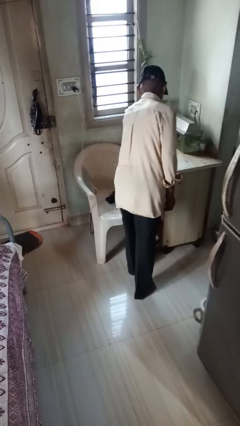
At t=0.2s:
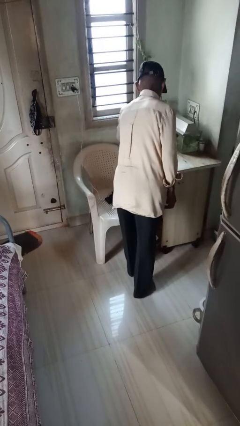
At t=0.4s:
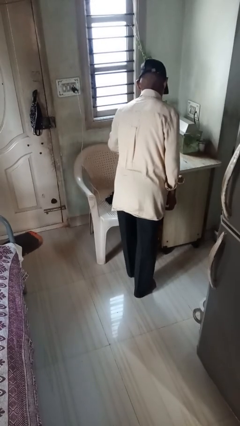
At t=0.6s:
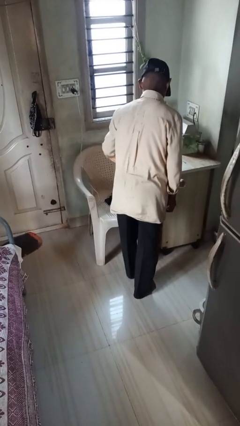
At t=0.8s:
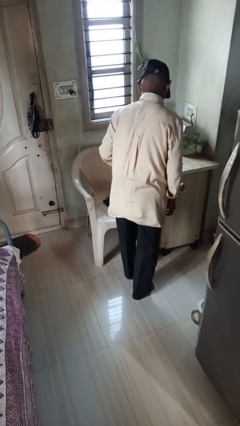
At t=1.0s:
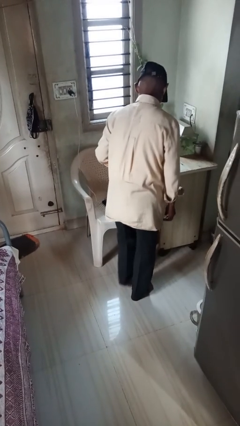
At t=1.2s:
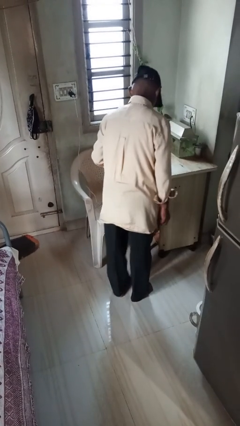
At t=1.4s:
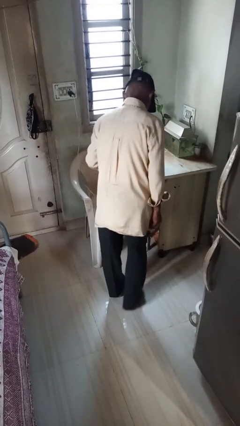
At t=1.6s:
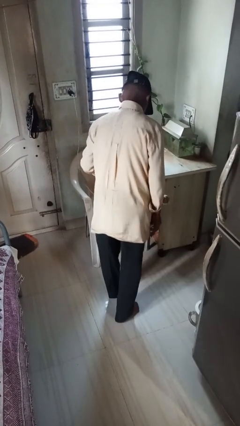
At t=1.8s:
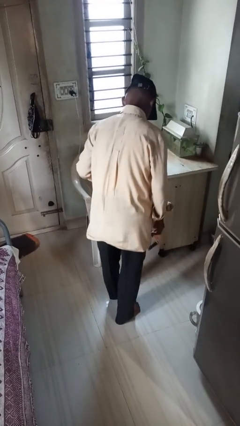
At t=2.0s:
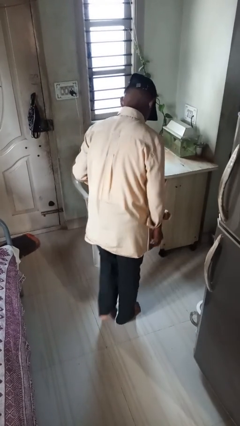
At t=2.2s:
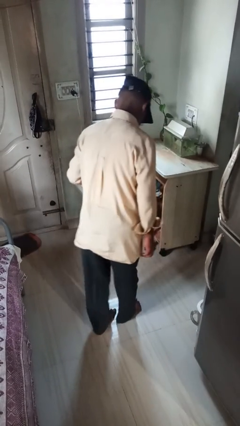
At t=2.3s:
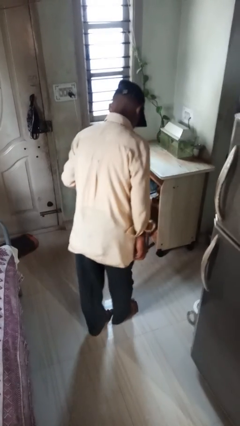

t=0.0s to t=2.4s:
person picks up object from table

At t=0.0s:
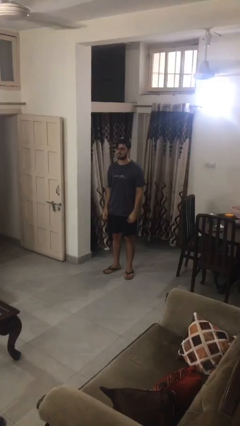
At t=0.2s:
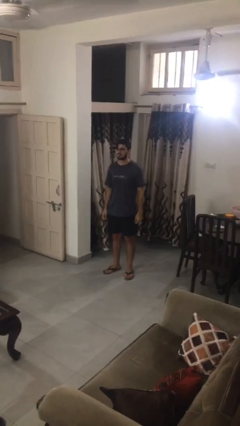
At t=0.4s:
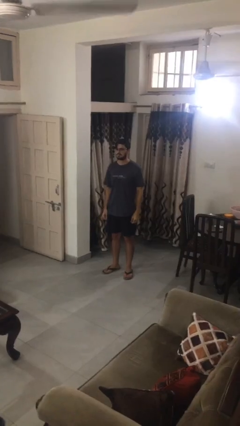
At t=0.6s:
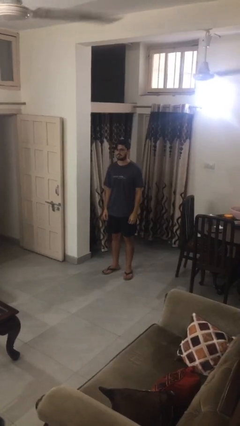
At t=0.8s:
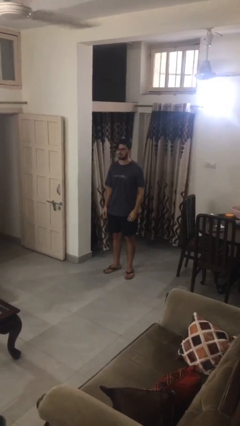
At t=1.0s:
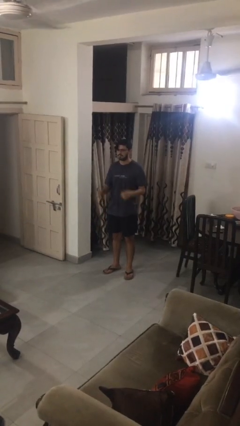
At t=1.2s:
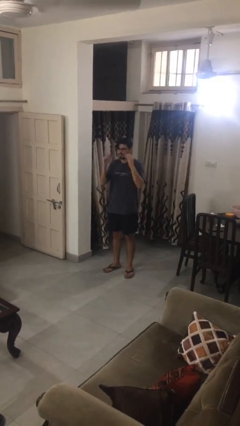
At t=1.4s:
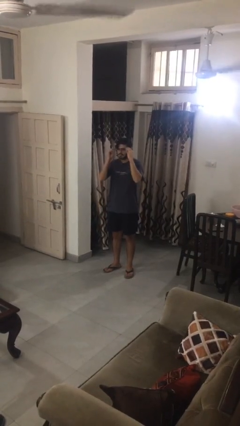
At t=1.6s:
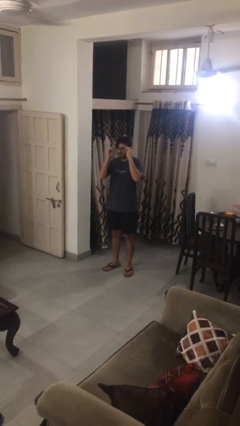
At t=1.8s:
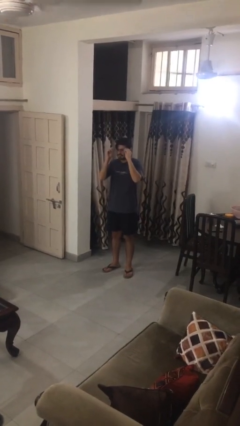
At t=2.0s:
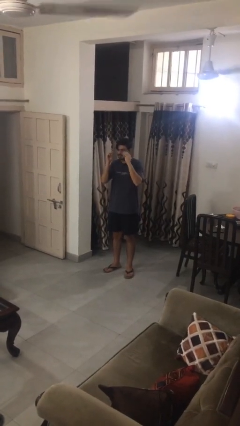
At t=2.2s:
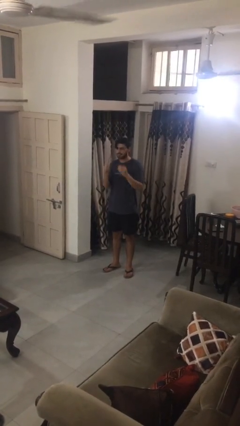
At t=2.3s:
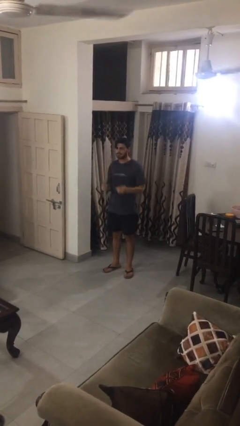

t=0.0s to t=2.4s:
person takes off glasses

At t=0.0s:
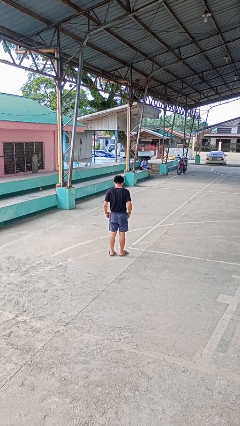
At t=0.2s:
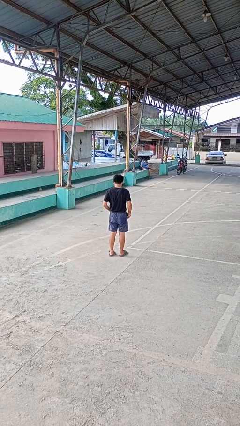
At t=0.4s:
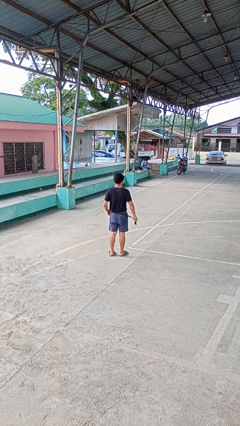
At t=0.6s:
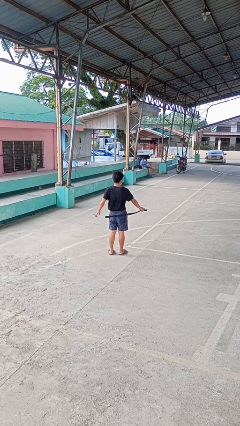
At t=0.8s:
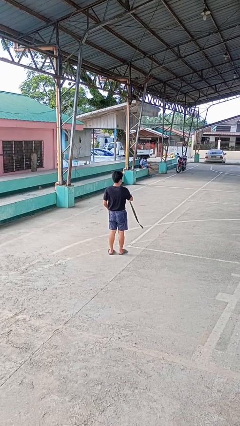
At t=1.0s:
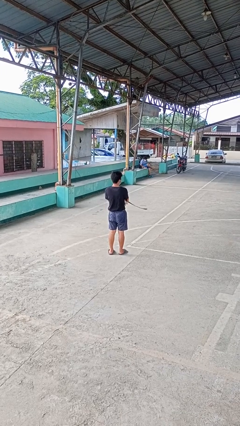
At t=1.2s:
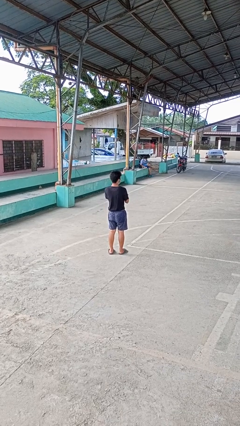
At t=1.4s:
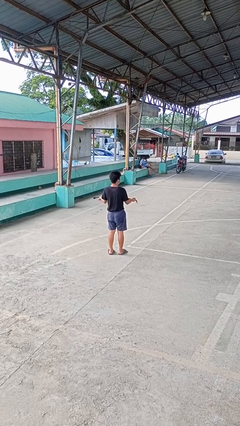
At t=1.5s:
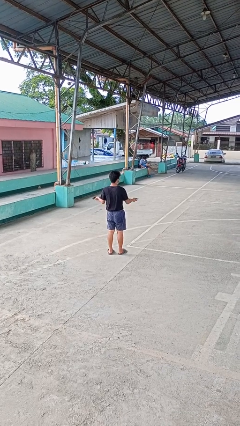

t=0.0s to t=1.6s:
person takes off belt

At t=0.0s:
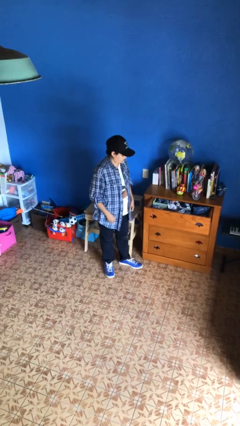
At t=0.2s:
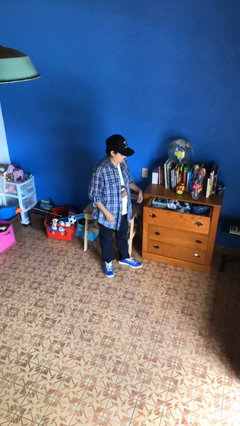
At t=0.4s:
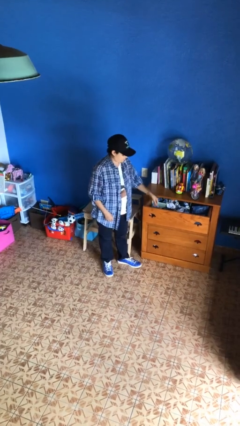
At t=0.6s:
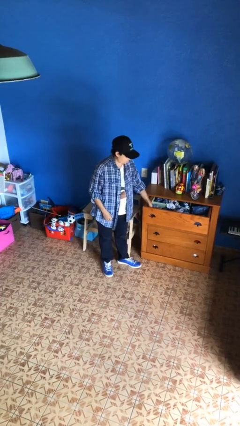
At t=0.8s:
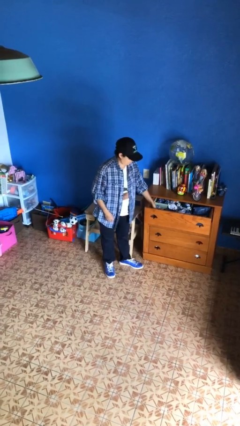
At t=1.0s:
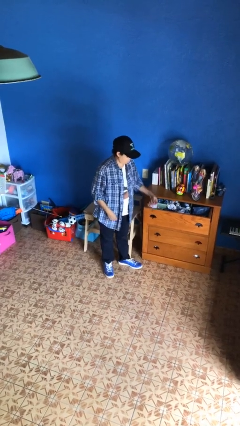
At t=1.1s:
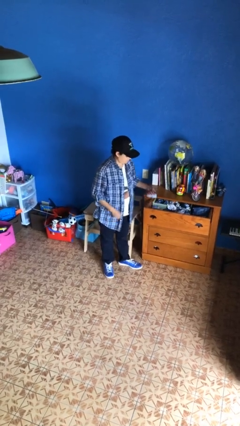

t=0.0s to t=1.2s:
person takes clothes from dresser

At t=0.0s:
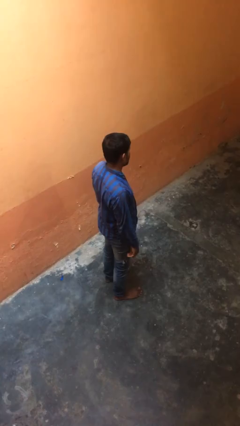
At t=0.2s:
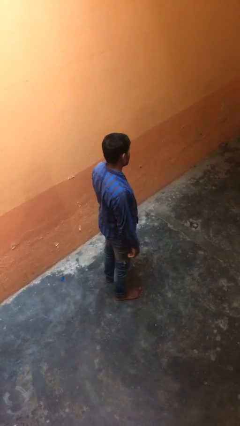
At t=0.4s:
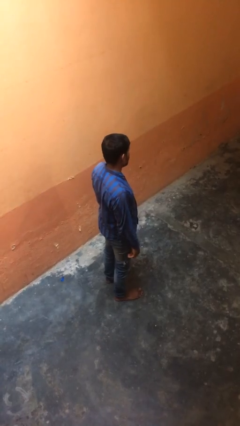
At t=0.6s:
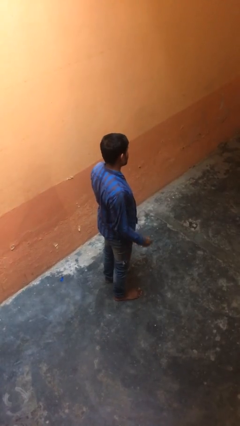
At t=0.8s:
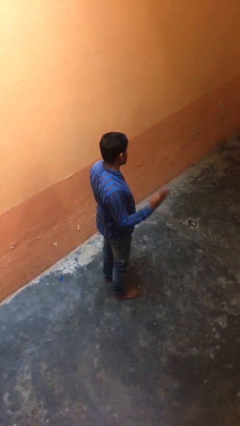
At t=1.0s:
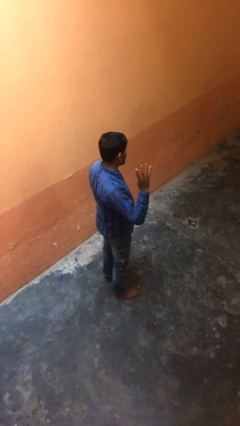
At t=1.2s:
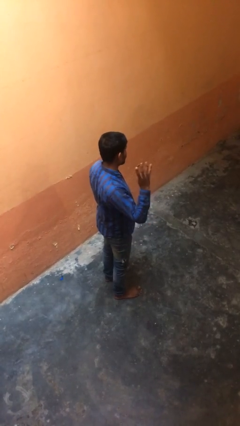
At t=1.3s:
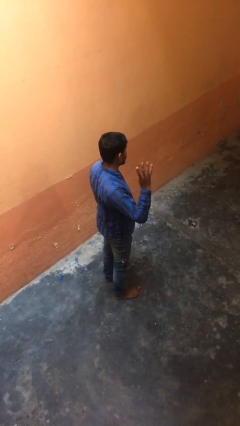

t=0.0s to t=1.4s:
person gestures number four

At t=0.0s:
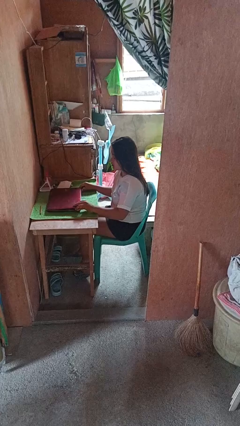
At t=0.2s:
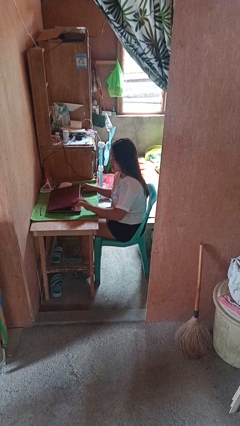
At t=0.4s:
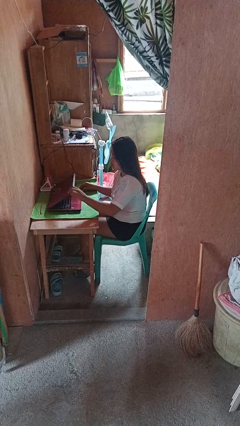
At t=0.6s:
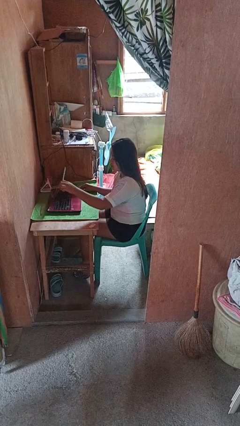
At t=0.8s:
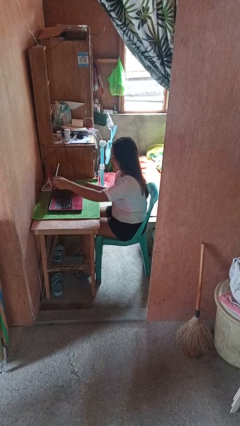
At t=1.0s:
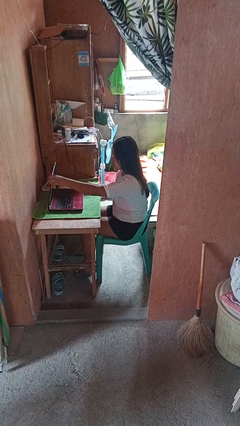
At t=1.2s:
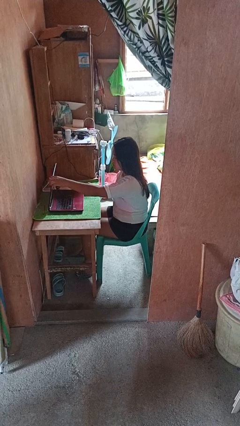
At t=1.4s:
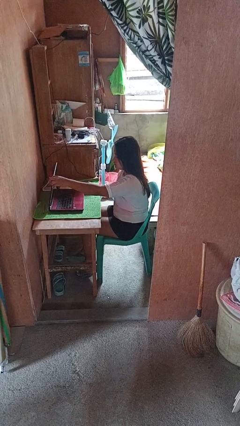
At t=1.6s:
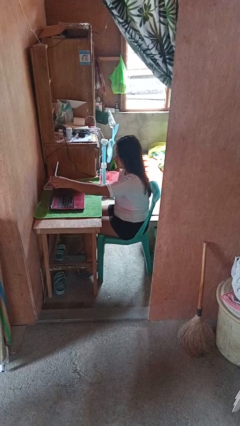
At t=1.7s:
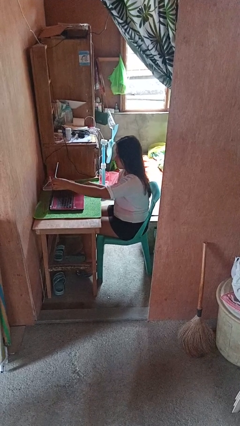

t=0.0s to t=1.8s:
person opens laptop

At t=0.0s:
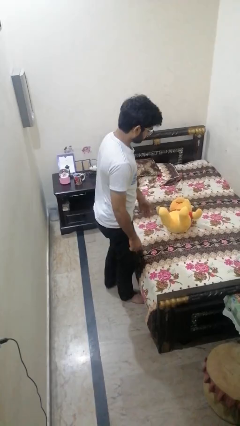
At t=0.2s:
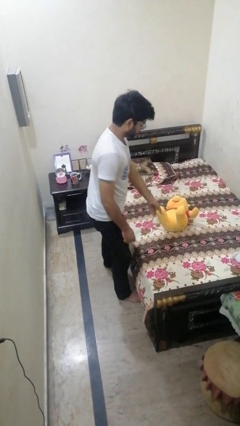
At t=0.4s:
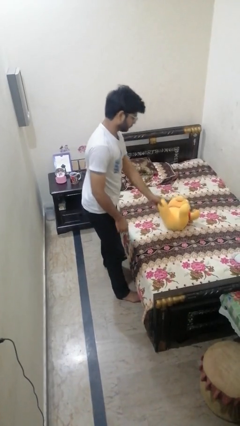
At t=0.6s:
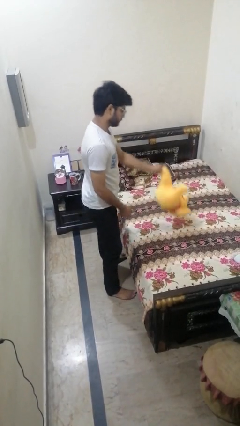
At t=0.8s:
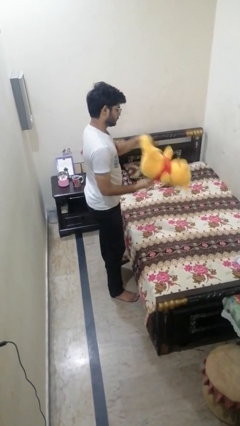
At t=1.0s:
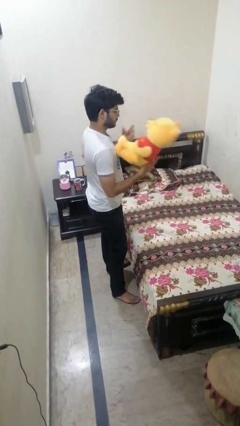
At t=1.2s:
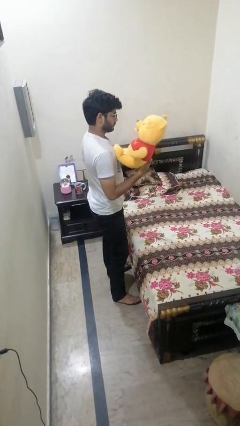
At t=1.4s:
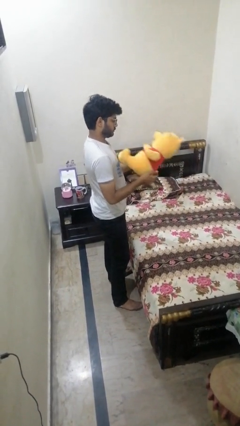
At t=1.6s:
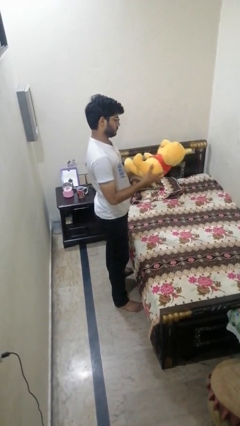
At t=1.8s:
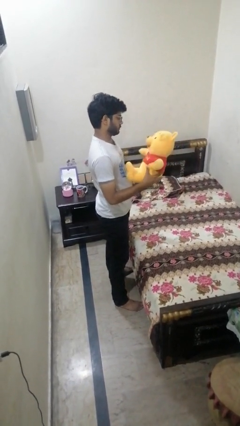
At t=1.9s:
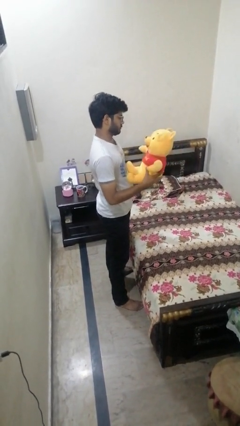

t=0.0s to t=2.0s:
person picks up object from bed

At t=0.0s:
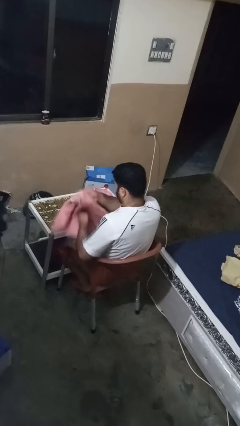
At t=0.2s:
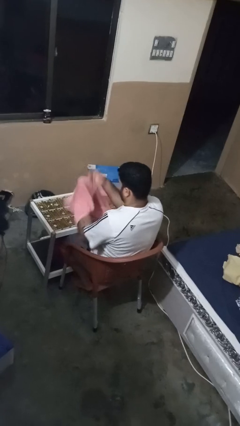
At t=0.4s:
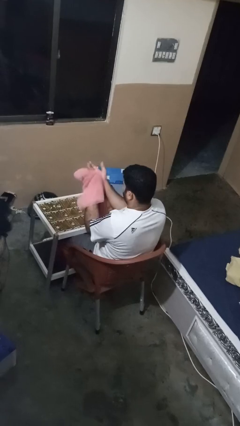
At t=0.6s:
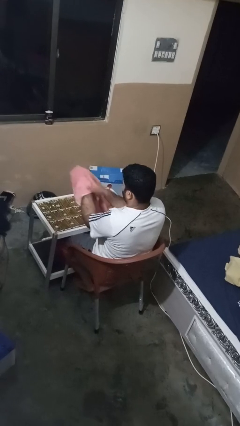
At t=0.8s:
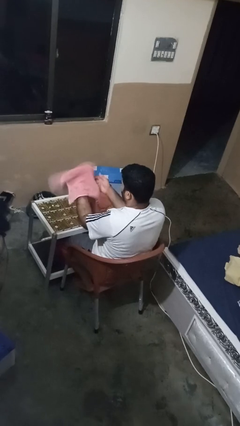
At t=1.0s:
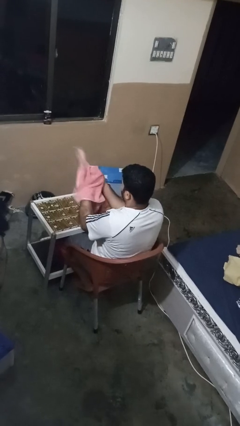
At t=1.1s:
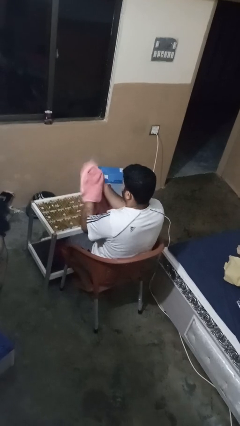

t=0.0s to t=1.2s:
person dries hands with towel

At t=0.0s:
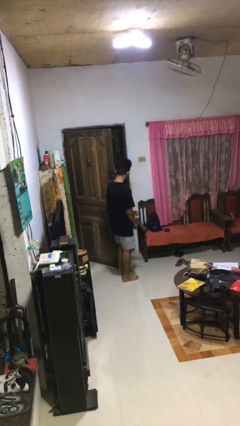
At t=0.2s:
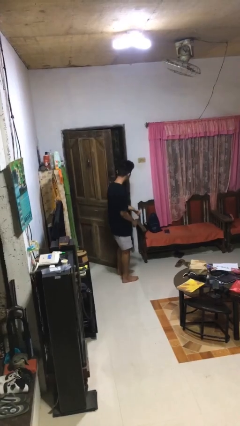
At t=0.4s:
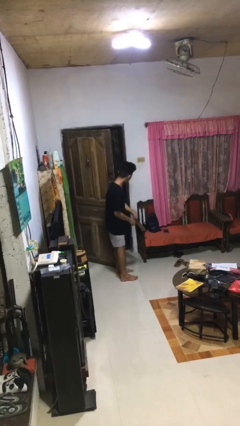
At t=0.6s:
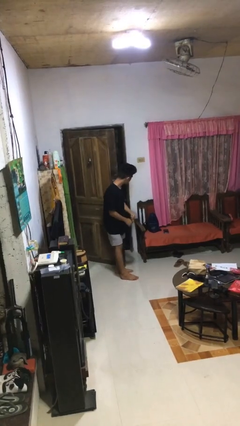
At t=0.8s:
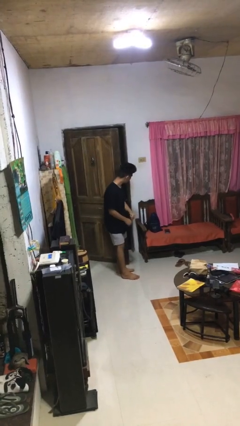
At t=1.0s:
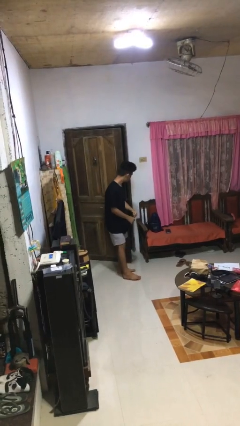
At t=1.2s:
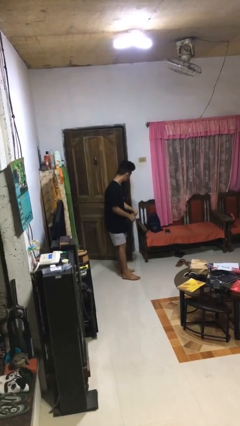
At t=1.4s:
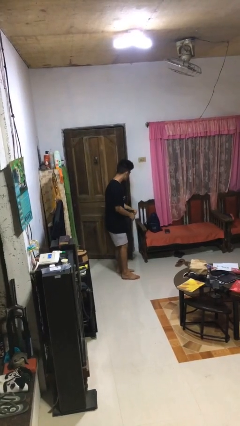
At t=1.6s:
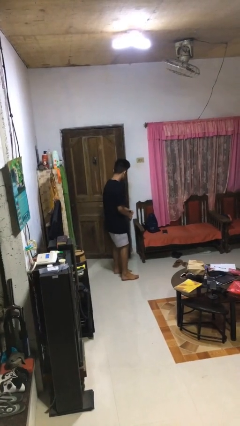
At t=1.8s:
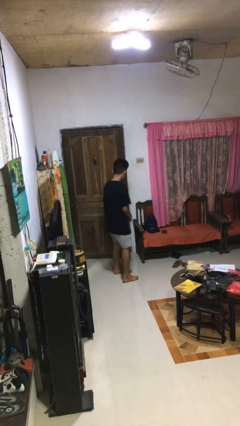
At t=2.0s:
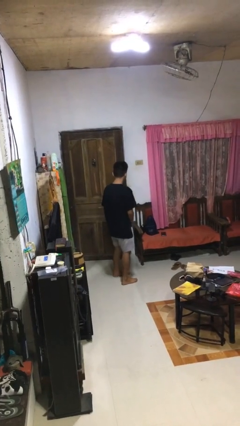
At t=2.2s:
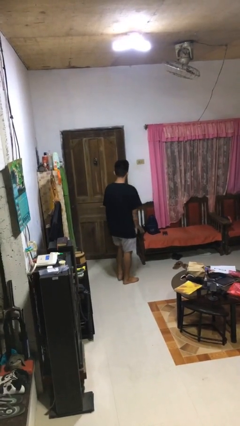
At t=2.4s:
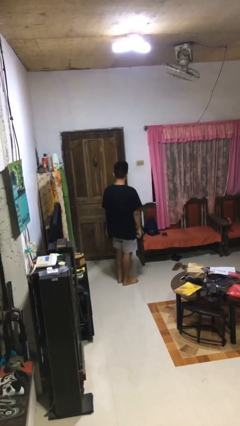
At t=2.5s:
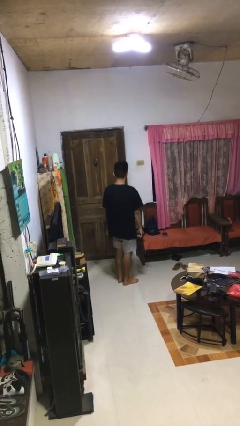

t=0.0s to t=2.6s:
person closes door with hip
